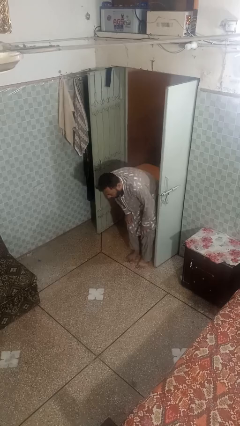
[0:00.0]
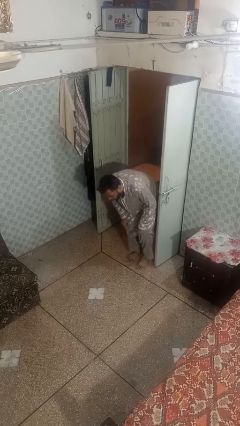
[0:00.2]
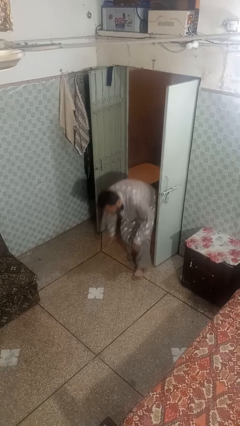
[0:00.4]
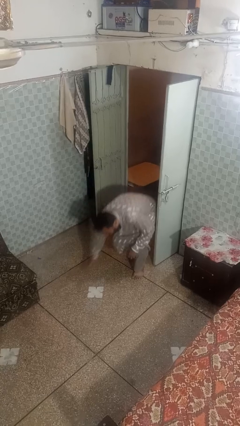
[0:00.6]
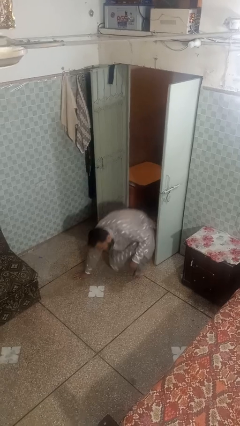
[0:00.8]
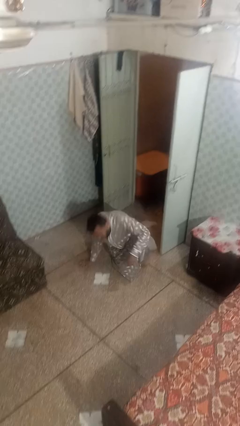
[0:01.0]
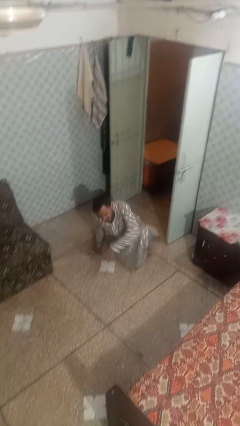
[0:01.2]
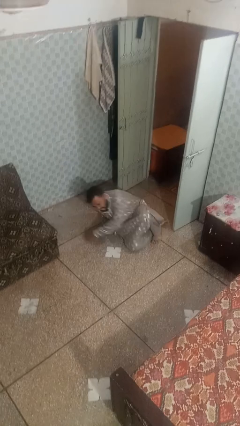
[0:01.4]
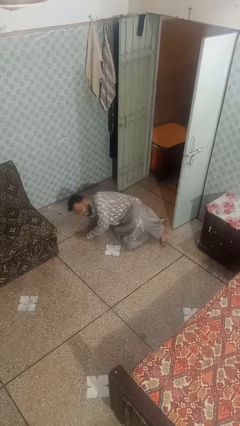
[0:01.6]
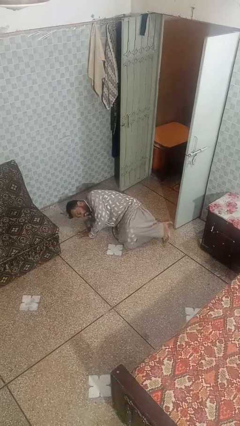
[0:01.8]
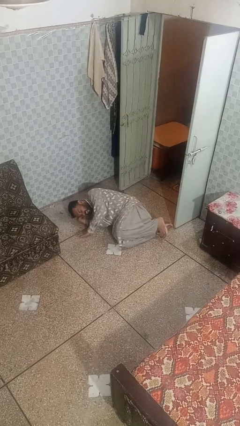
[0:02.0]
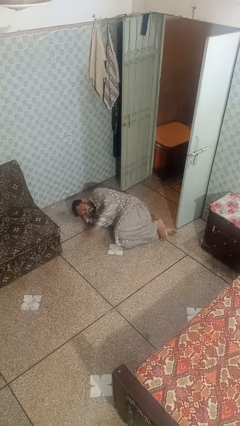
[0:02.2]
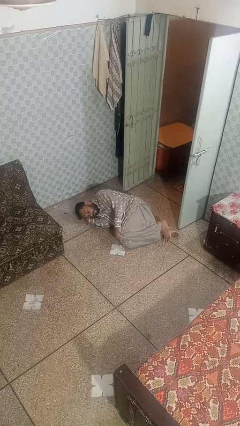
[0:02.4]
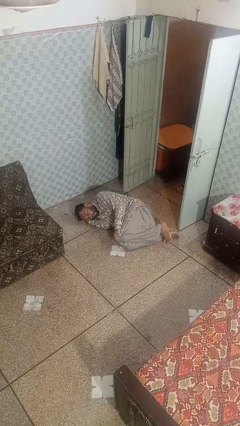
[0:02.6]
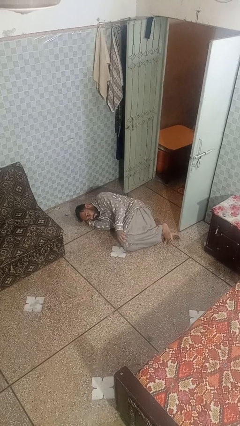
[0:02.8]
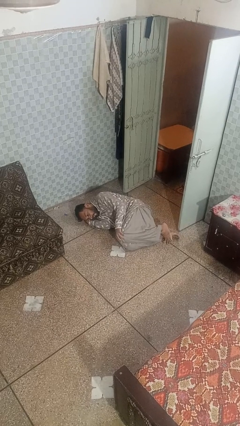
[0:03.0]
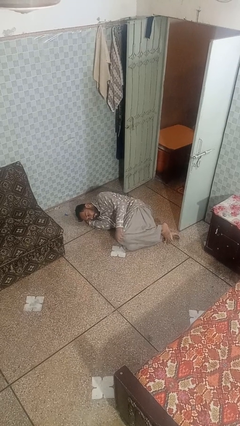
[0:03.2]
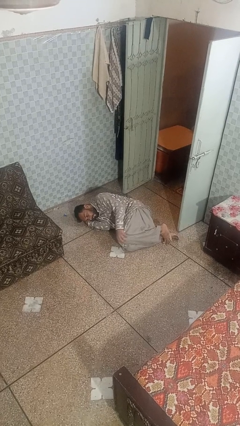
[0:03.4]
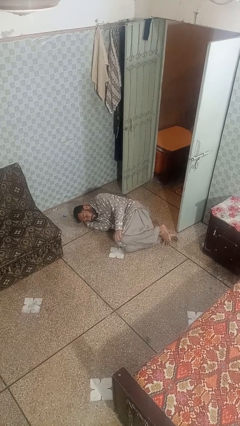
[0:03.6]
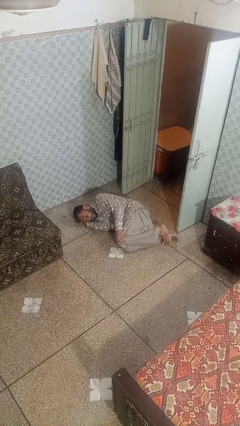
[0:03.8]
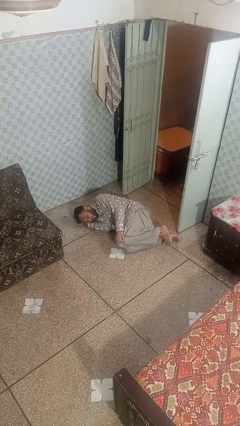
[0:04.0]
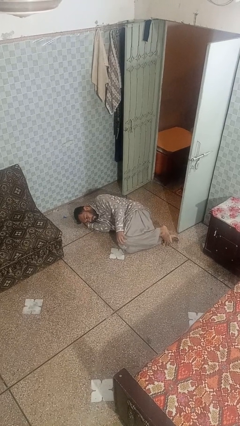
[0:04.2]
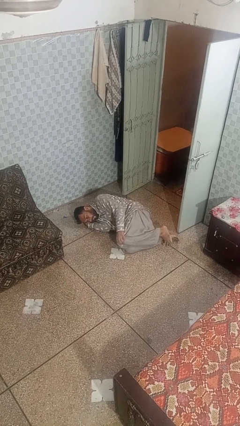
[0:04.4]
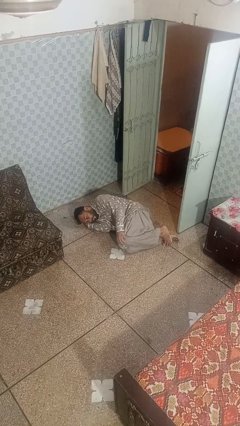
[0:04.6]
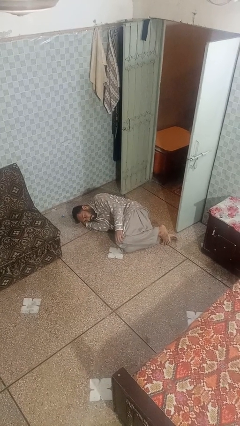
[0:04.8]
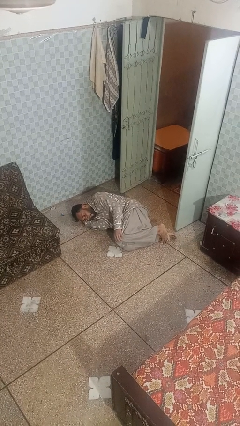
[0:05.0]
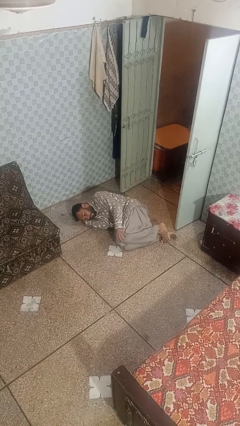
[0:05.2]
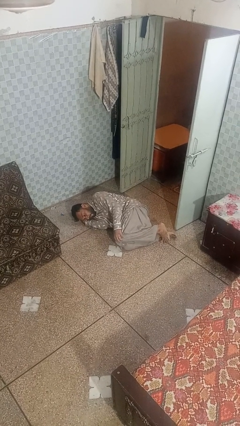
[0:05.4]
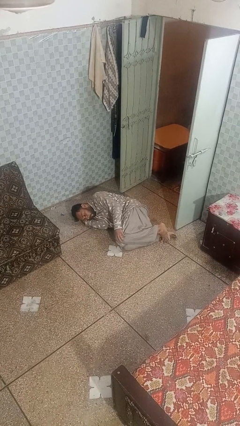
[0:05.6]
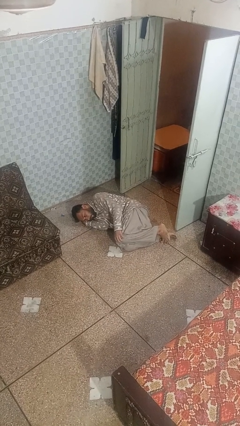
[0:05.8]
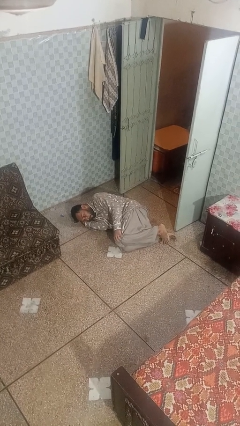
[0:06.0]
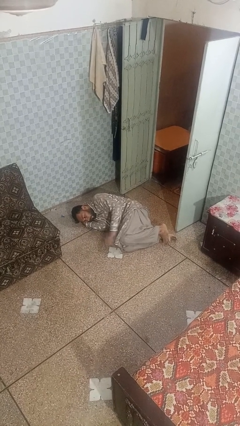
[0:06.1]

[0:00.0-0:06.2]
person lies down on floor

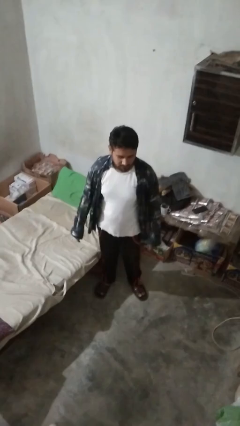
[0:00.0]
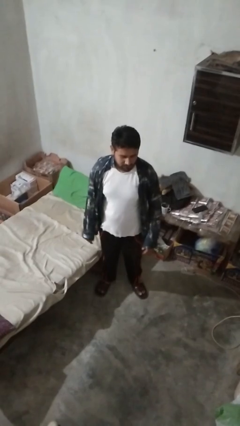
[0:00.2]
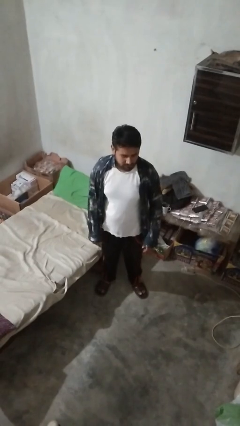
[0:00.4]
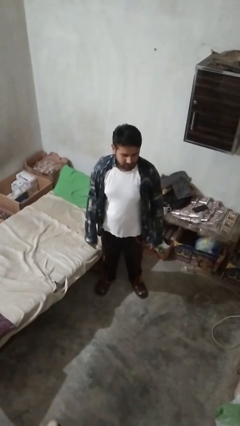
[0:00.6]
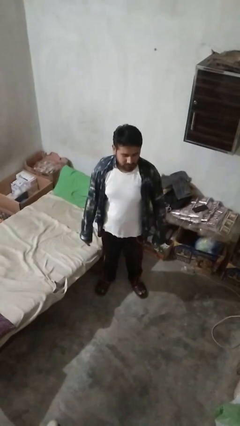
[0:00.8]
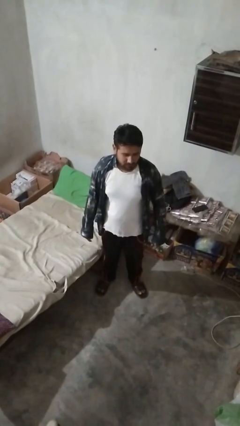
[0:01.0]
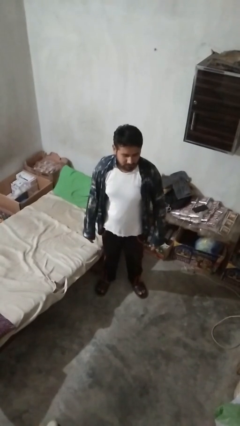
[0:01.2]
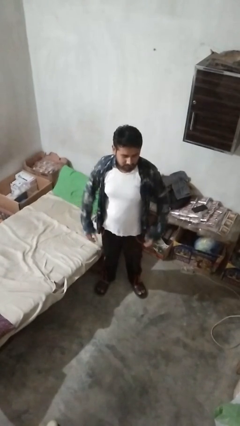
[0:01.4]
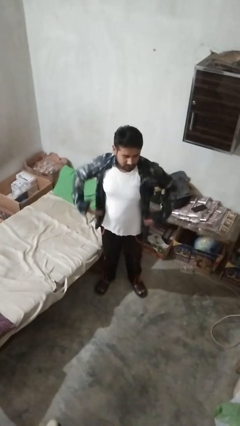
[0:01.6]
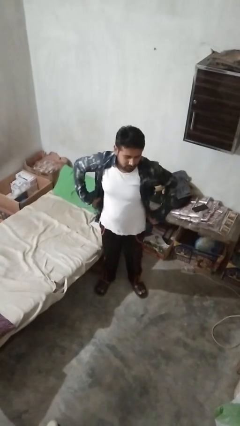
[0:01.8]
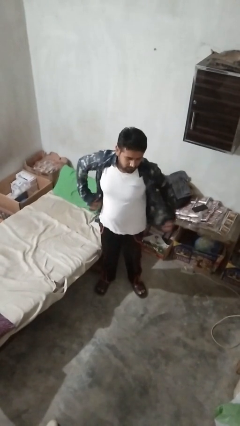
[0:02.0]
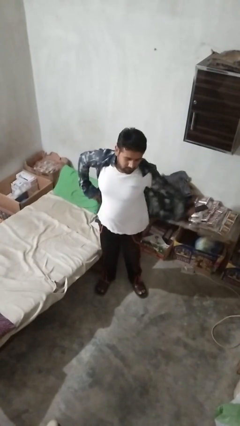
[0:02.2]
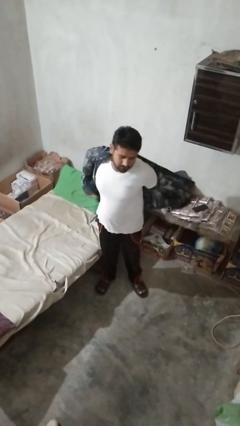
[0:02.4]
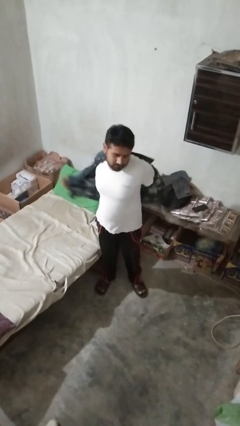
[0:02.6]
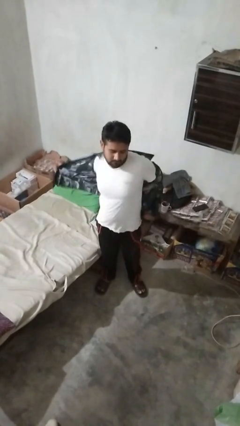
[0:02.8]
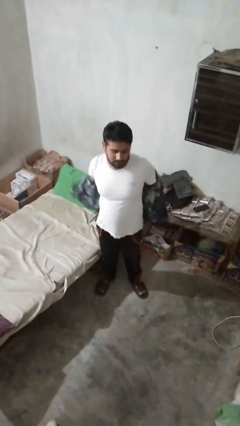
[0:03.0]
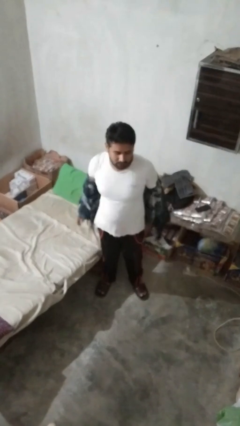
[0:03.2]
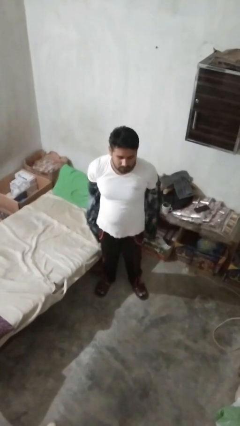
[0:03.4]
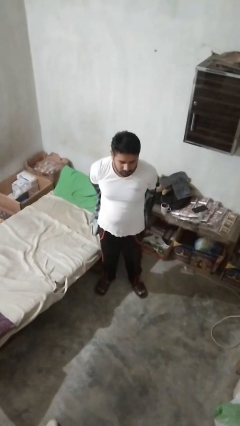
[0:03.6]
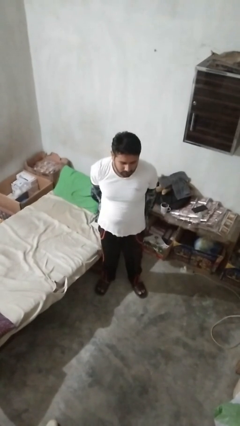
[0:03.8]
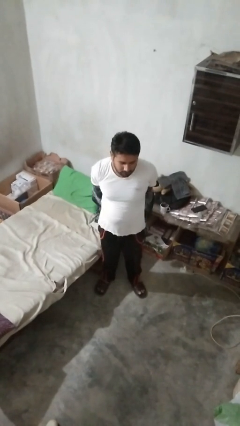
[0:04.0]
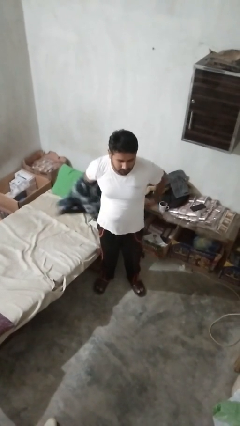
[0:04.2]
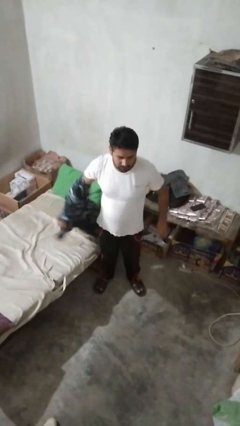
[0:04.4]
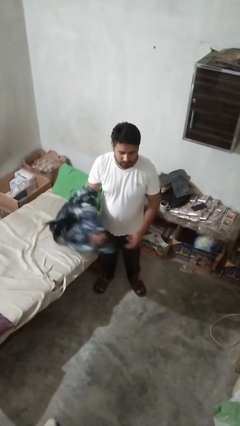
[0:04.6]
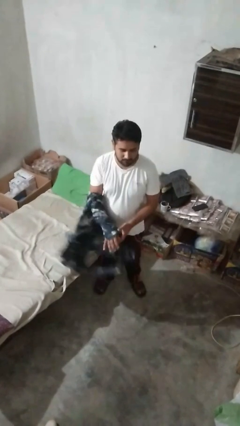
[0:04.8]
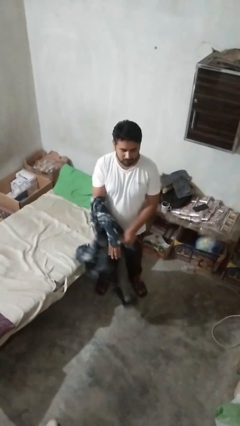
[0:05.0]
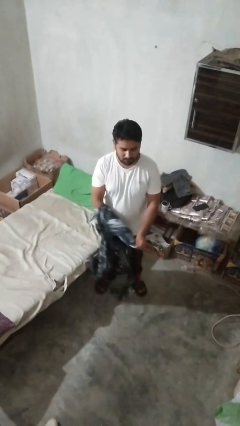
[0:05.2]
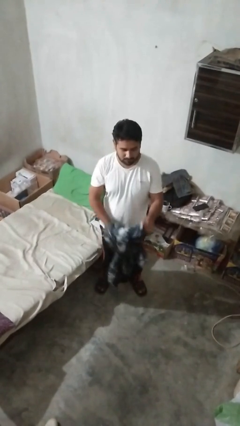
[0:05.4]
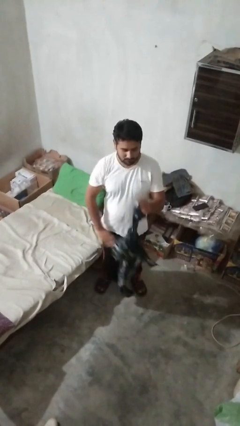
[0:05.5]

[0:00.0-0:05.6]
person takes off shirt

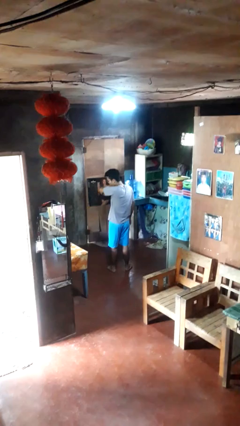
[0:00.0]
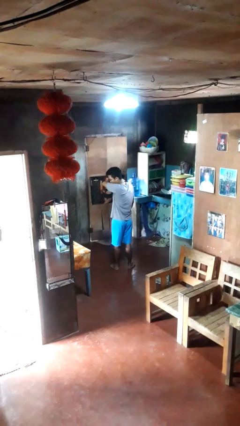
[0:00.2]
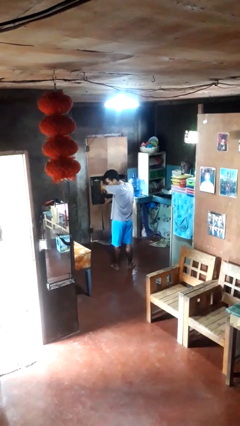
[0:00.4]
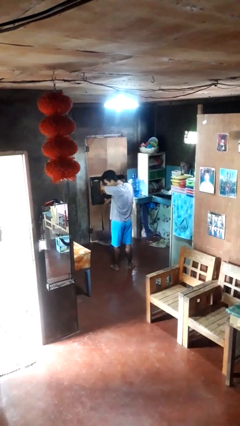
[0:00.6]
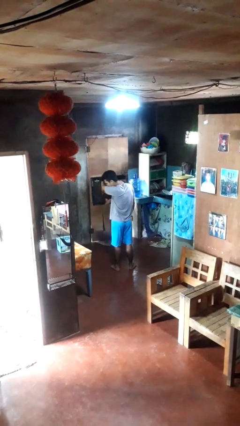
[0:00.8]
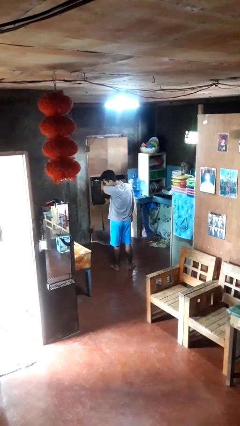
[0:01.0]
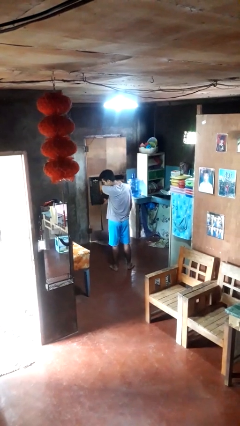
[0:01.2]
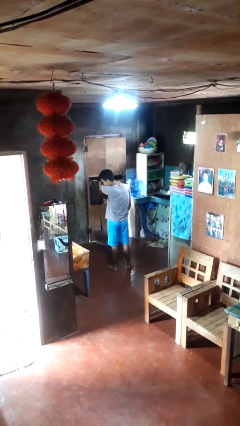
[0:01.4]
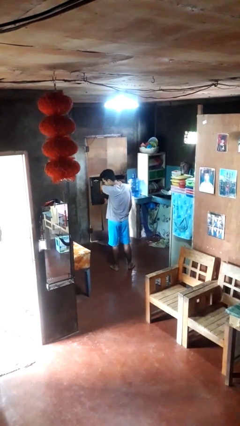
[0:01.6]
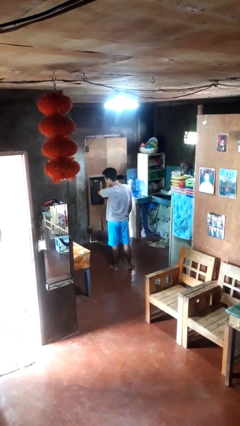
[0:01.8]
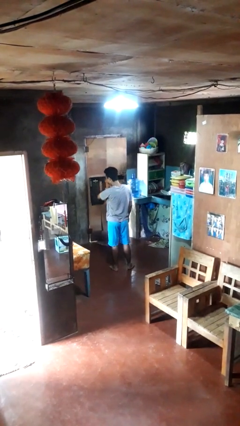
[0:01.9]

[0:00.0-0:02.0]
person sneezes into arm

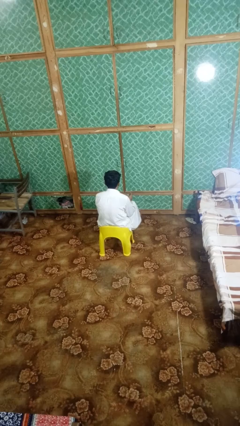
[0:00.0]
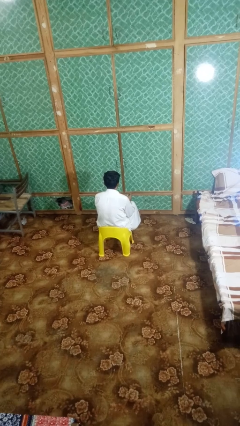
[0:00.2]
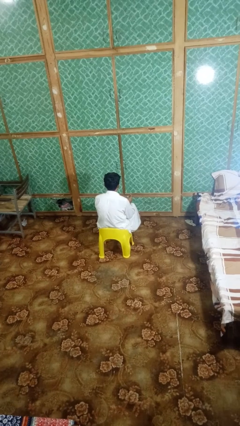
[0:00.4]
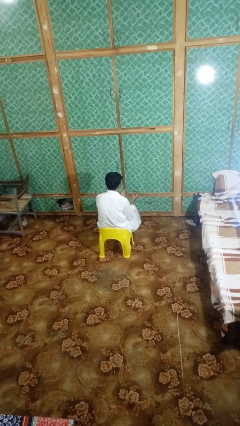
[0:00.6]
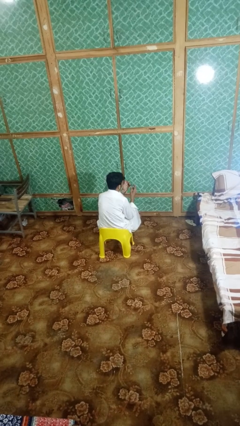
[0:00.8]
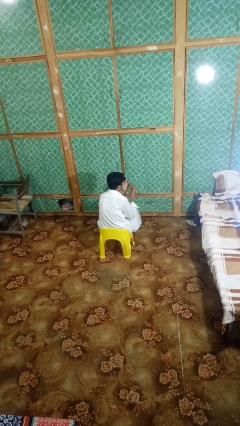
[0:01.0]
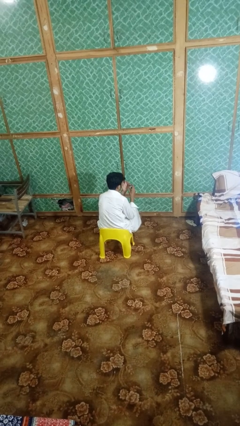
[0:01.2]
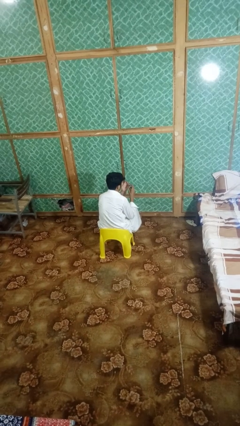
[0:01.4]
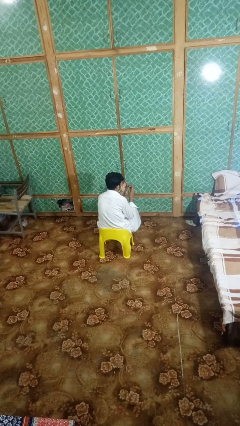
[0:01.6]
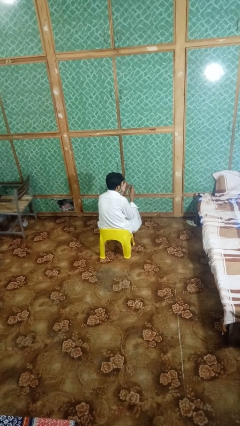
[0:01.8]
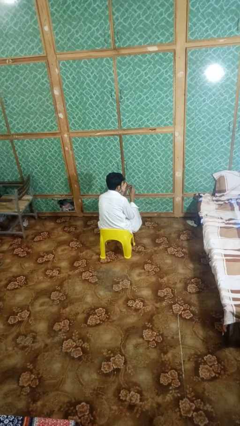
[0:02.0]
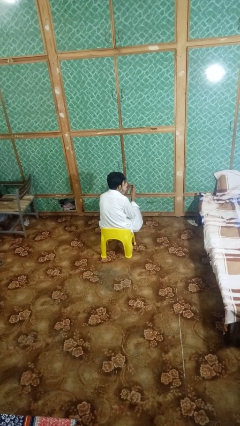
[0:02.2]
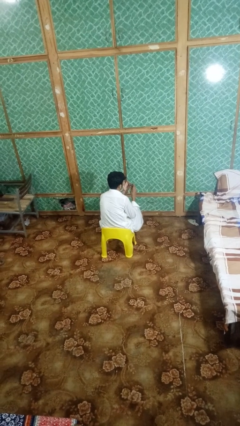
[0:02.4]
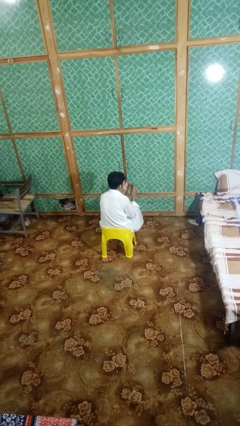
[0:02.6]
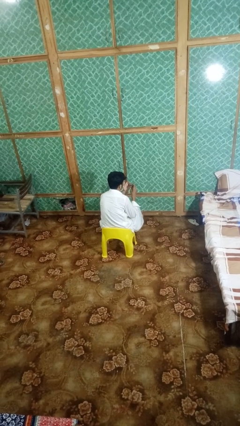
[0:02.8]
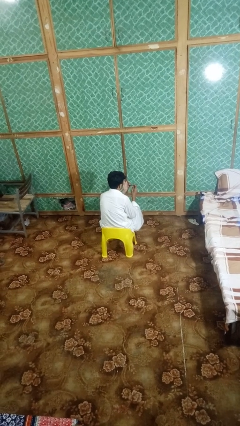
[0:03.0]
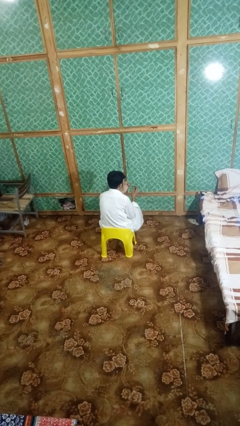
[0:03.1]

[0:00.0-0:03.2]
person clips fingernails

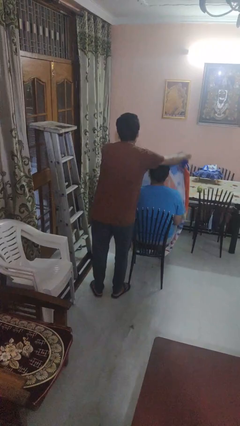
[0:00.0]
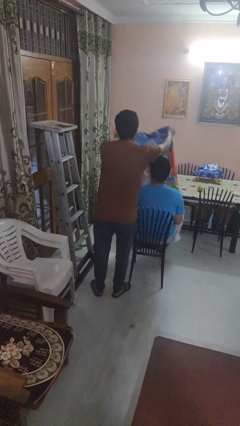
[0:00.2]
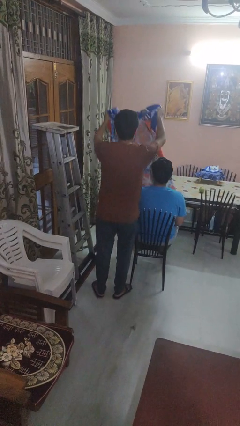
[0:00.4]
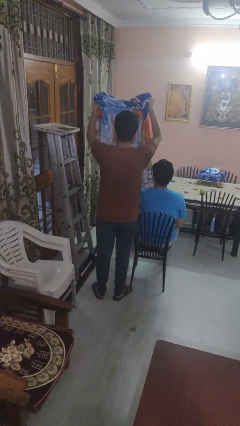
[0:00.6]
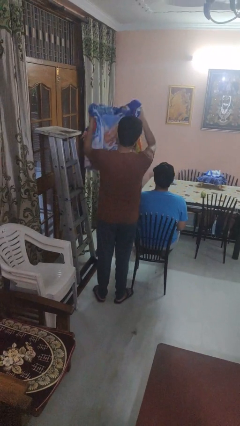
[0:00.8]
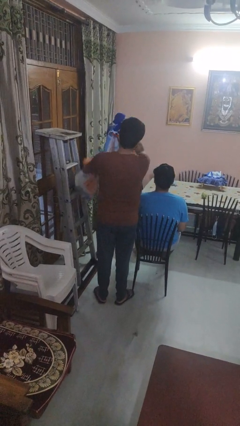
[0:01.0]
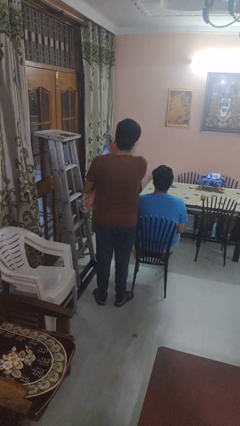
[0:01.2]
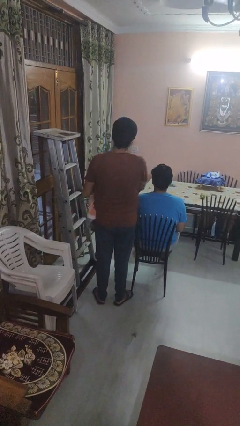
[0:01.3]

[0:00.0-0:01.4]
person uncovers friend with blanket
